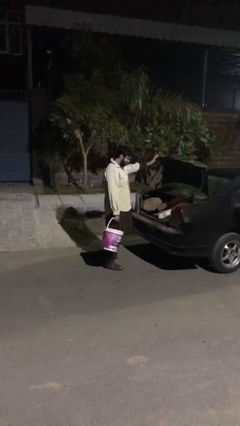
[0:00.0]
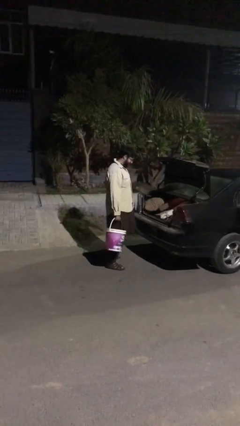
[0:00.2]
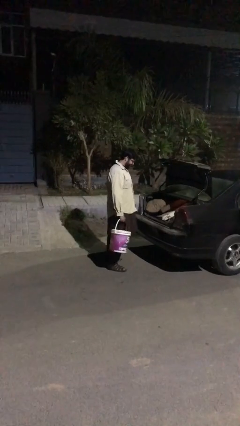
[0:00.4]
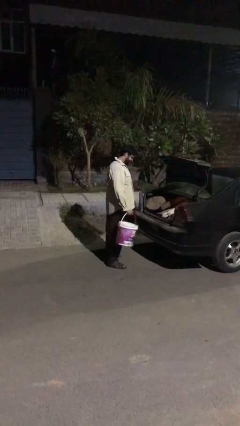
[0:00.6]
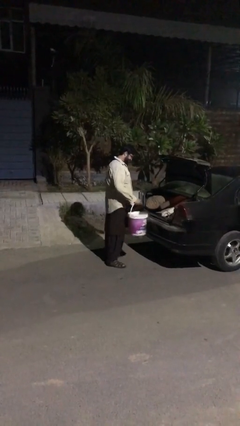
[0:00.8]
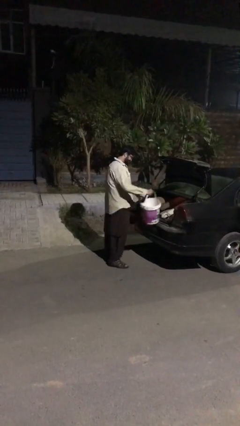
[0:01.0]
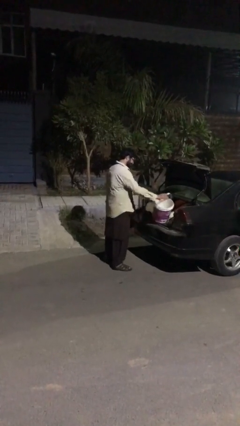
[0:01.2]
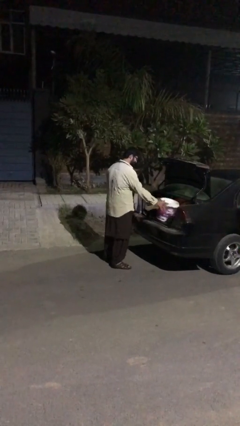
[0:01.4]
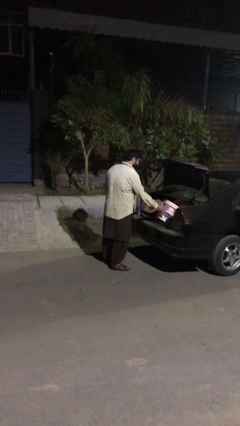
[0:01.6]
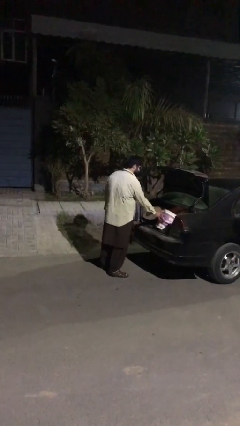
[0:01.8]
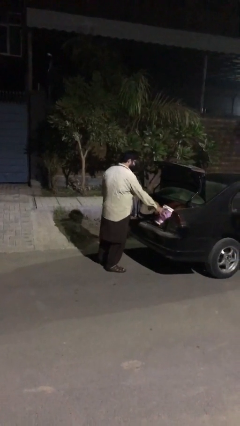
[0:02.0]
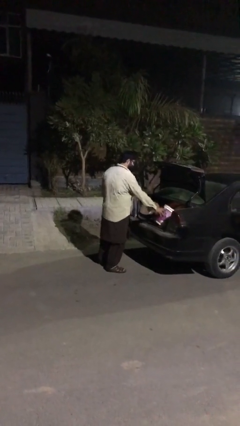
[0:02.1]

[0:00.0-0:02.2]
person loads car

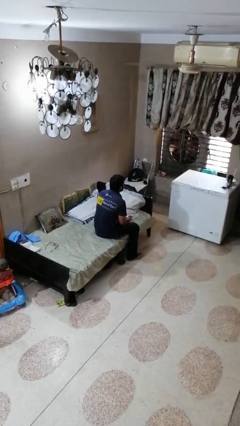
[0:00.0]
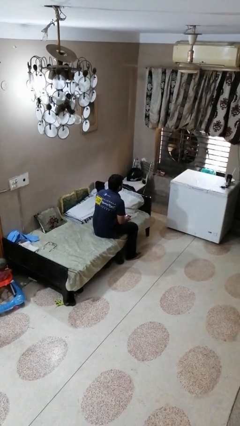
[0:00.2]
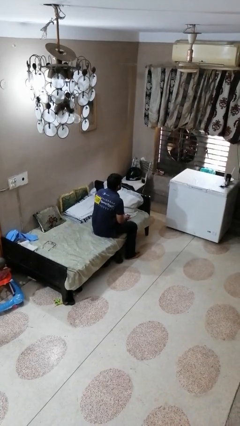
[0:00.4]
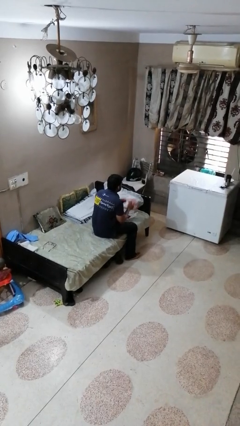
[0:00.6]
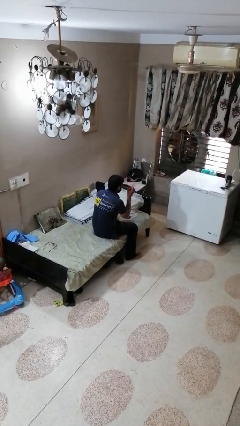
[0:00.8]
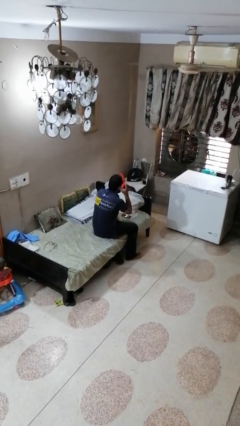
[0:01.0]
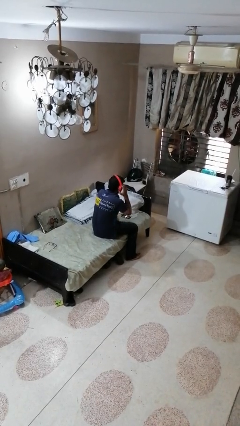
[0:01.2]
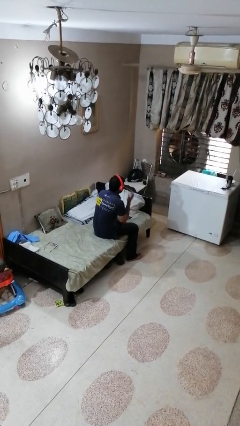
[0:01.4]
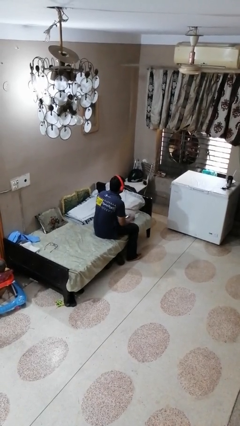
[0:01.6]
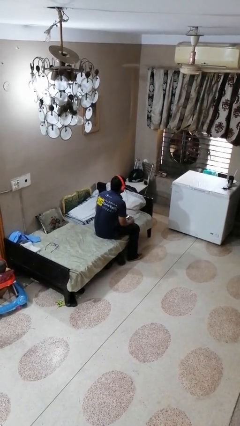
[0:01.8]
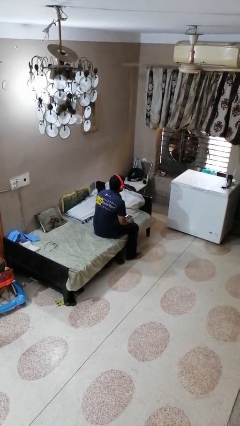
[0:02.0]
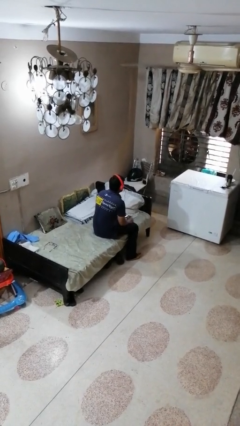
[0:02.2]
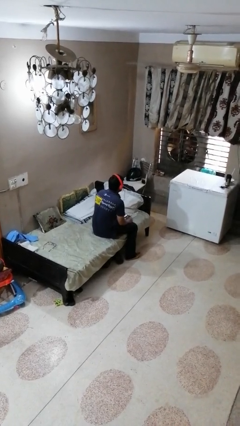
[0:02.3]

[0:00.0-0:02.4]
person puts on headphones

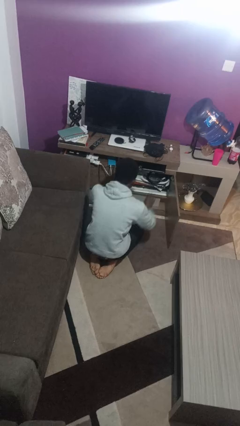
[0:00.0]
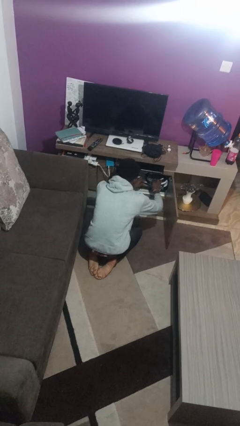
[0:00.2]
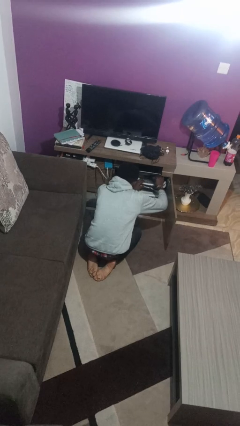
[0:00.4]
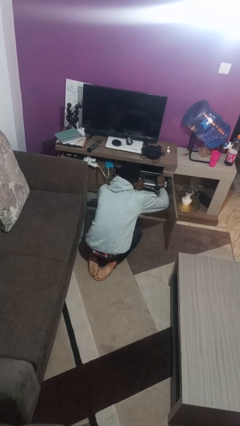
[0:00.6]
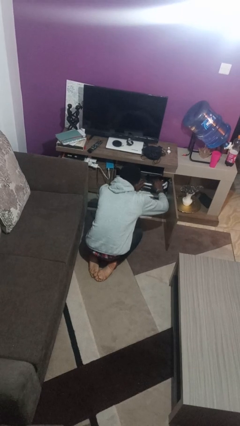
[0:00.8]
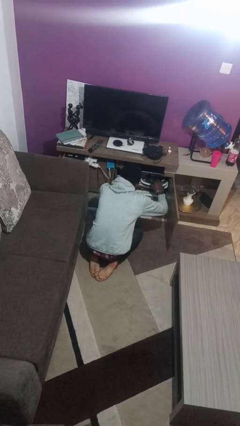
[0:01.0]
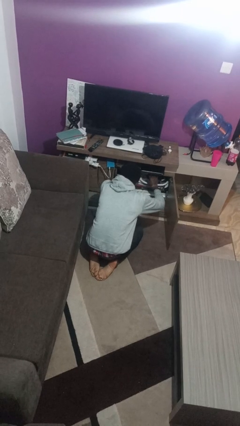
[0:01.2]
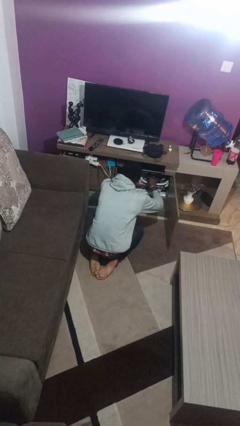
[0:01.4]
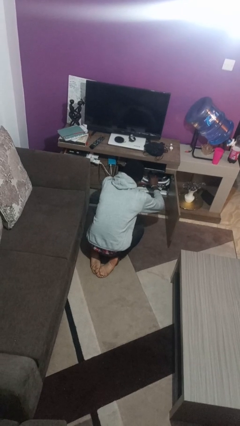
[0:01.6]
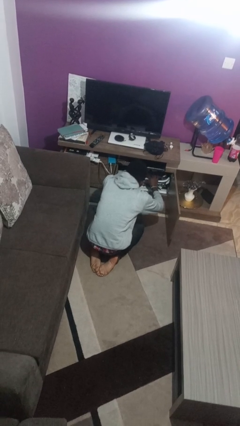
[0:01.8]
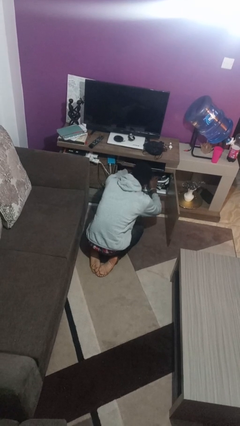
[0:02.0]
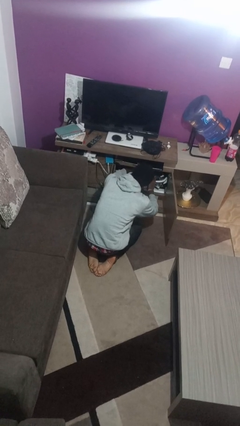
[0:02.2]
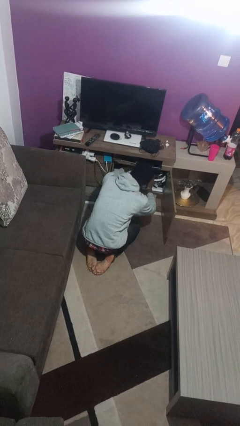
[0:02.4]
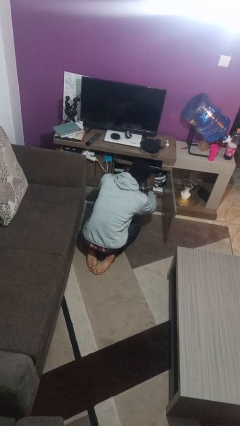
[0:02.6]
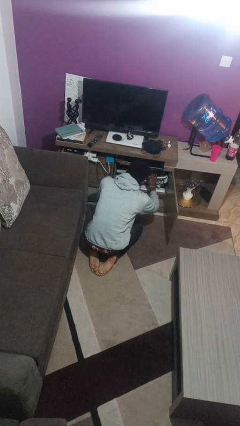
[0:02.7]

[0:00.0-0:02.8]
person searches in cabinet

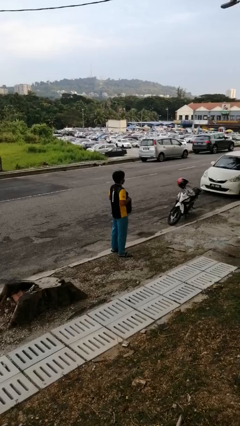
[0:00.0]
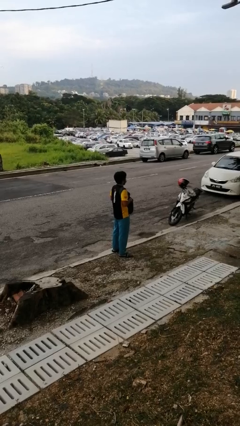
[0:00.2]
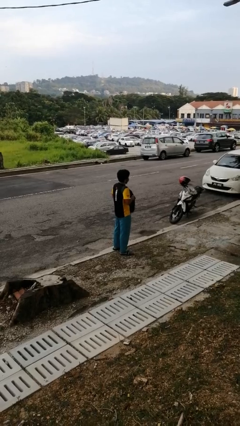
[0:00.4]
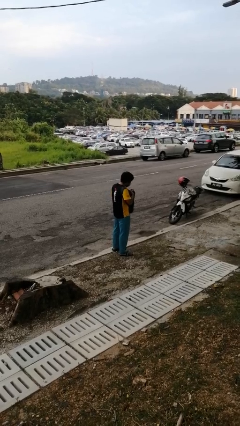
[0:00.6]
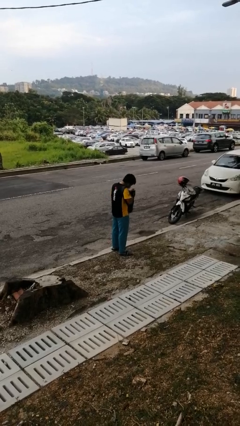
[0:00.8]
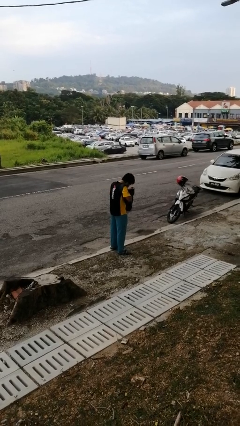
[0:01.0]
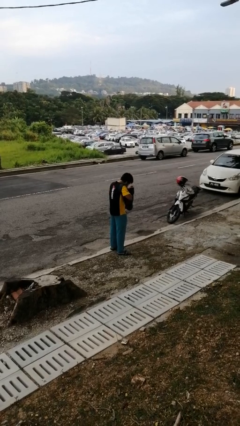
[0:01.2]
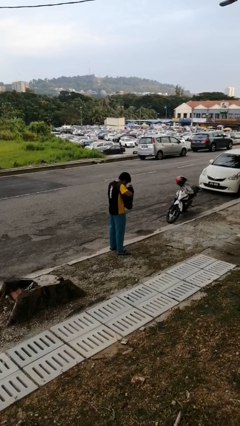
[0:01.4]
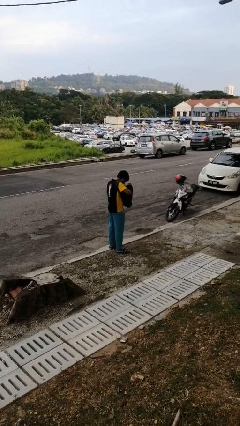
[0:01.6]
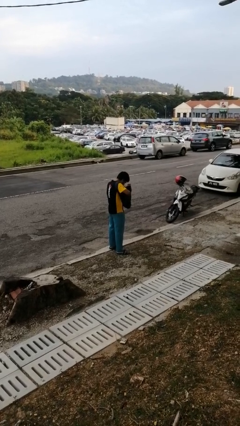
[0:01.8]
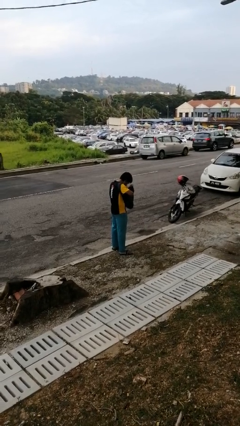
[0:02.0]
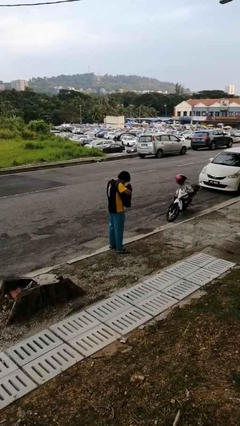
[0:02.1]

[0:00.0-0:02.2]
person searches in backpack

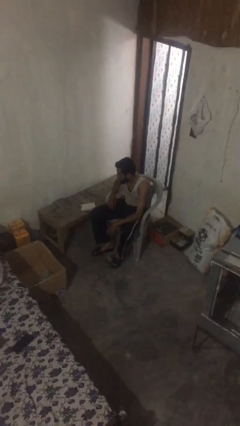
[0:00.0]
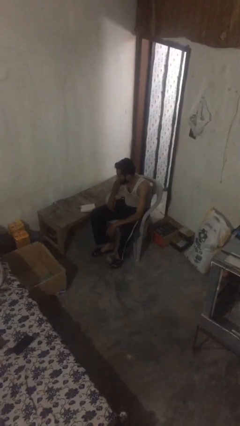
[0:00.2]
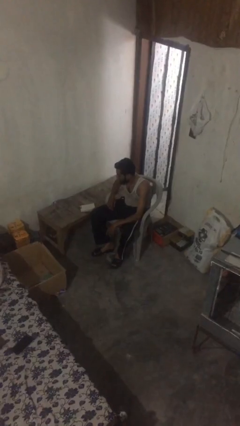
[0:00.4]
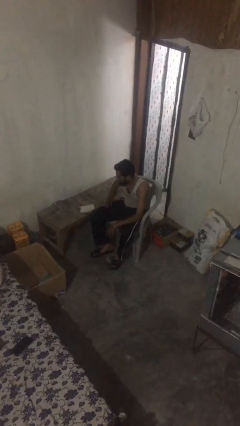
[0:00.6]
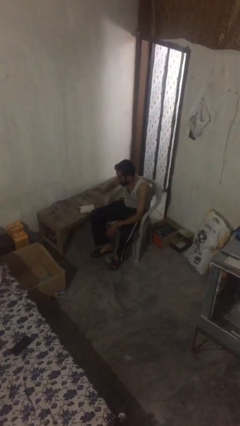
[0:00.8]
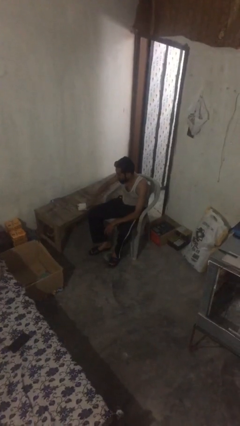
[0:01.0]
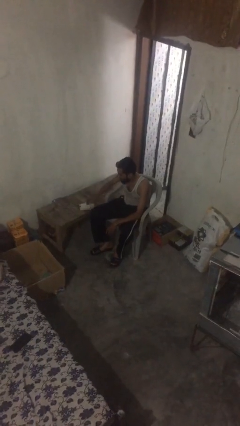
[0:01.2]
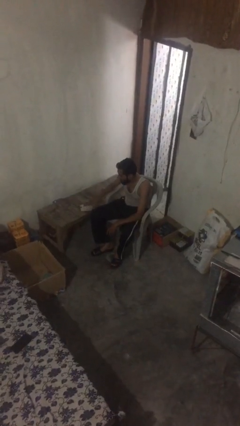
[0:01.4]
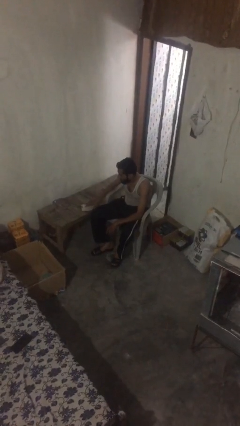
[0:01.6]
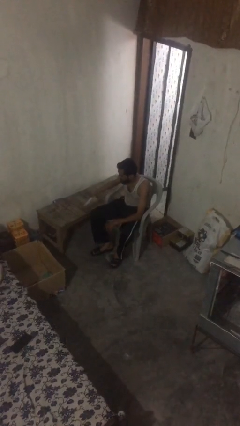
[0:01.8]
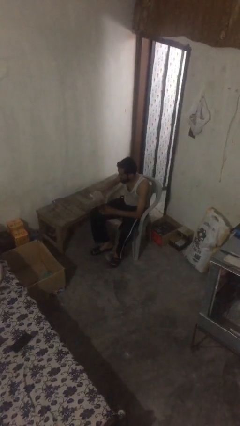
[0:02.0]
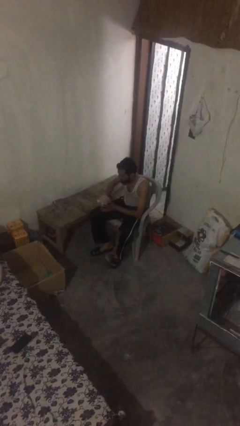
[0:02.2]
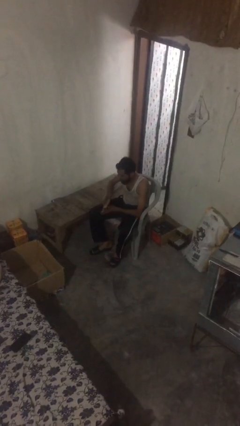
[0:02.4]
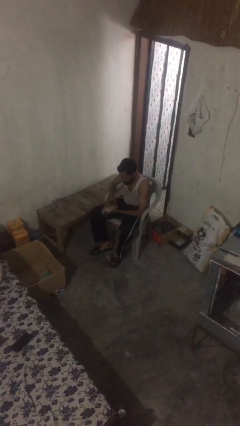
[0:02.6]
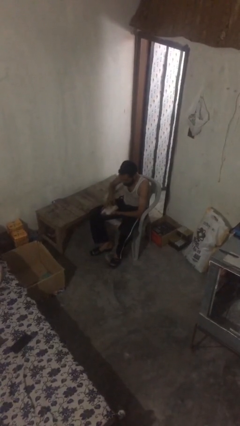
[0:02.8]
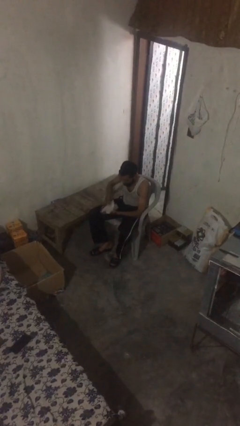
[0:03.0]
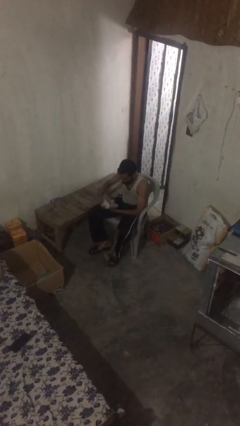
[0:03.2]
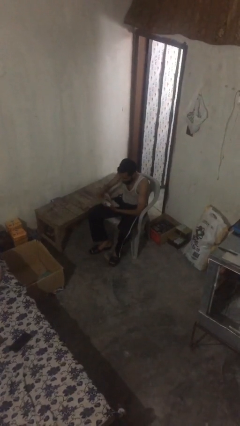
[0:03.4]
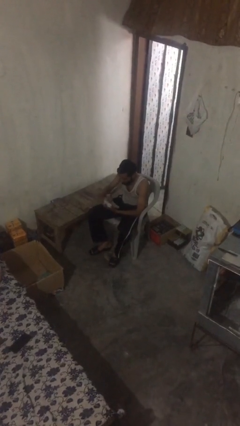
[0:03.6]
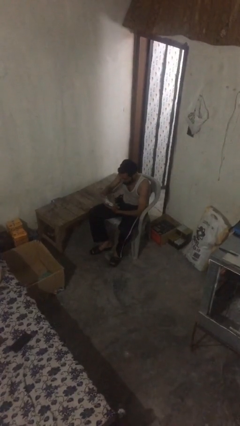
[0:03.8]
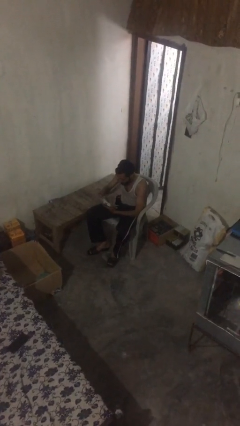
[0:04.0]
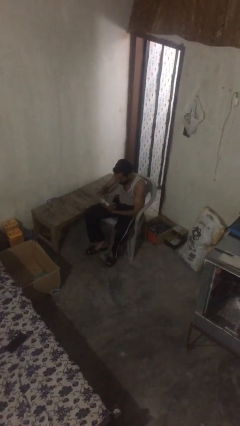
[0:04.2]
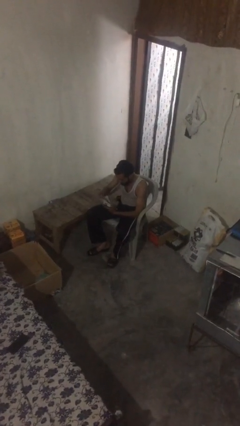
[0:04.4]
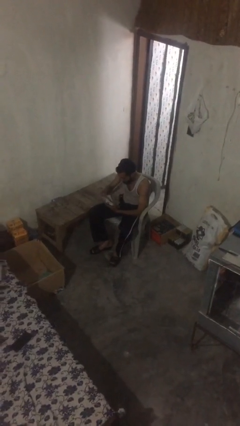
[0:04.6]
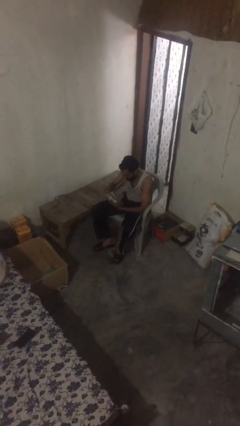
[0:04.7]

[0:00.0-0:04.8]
person reads document

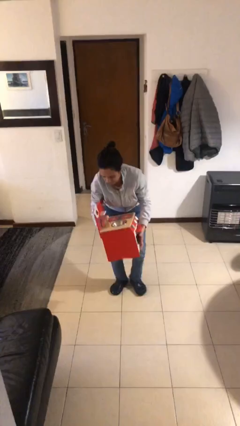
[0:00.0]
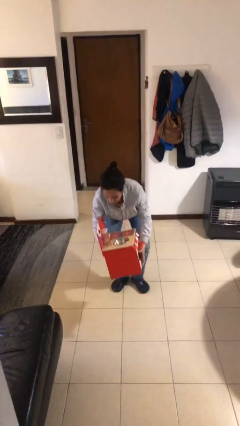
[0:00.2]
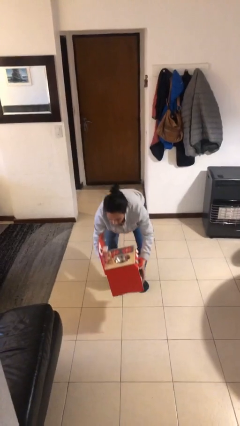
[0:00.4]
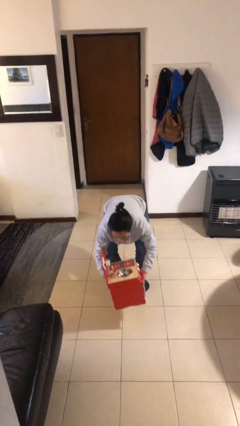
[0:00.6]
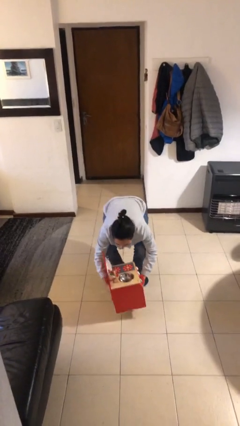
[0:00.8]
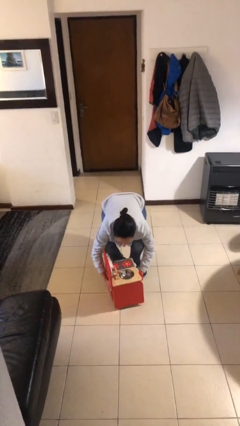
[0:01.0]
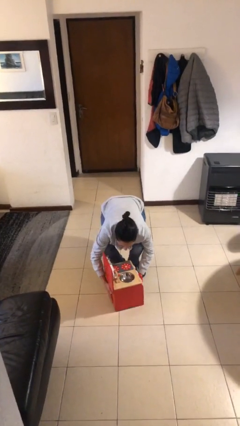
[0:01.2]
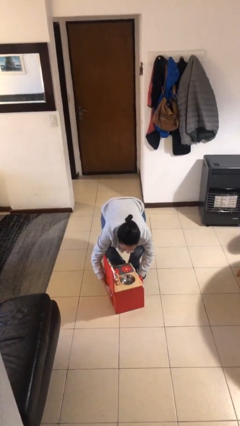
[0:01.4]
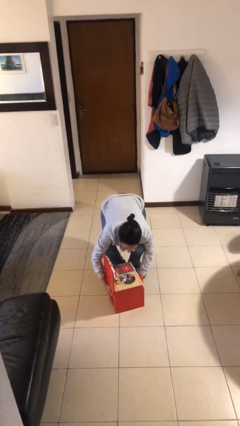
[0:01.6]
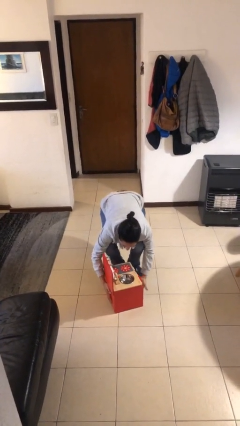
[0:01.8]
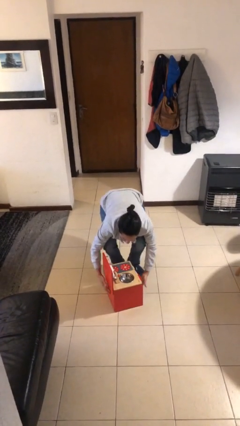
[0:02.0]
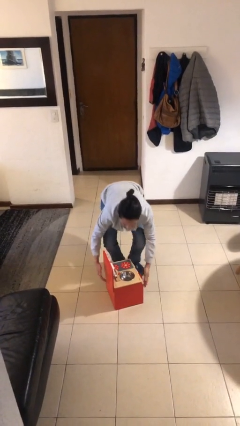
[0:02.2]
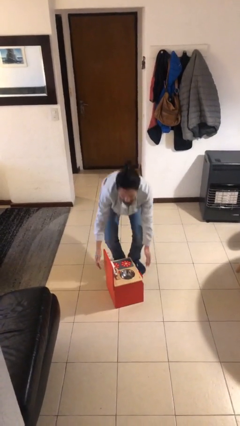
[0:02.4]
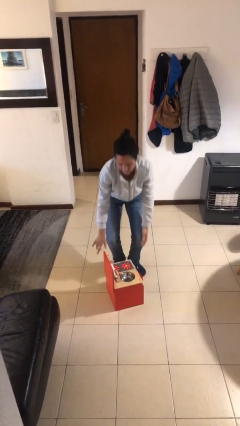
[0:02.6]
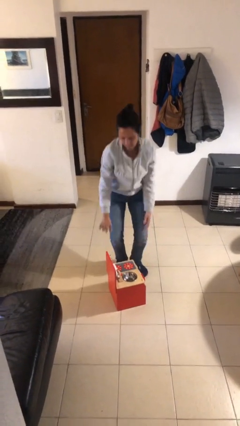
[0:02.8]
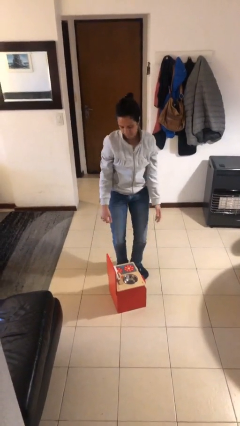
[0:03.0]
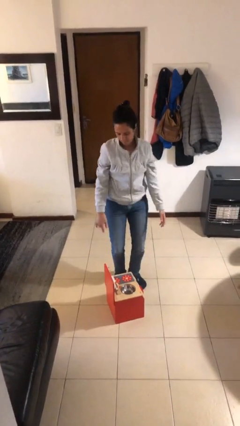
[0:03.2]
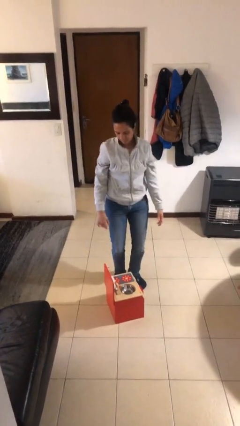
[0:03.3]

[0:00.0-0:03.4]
person puts down object on floor
